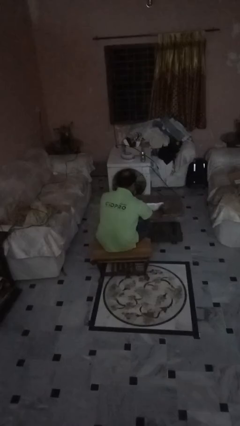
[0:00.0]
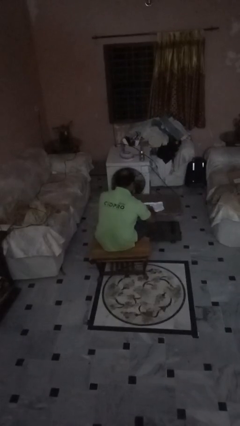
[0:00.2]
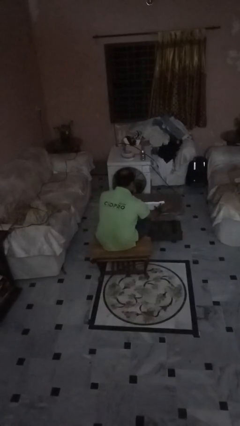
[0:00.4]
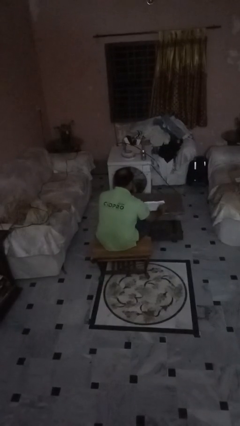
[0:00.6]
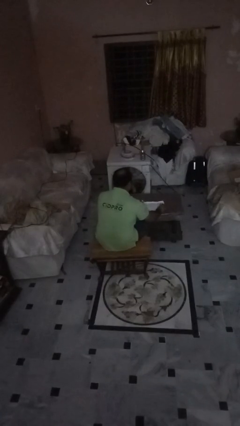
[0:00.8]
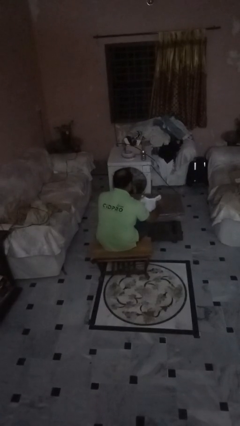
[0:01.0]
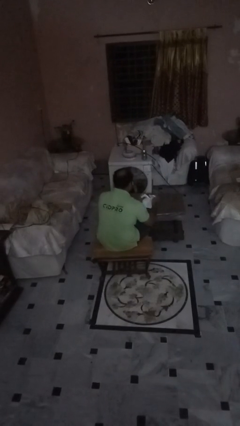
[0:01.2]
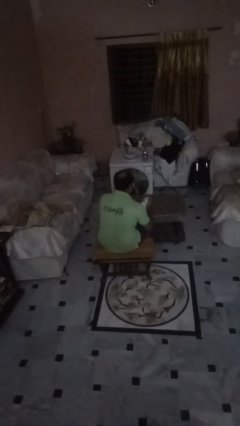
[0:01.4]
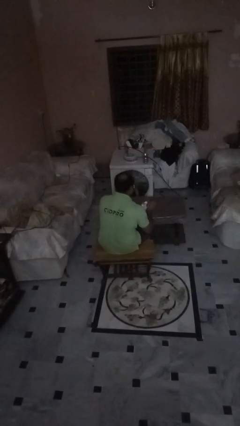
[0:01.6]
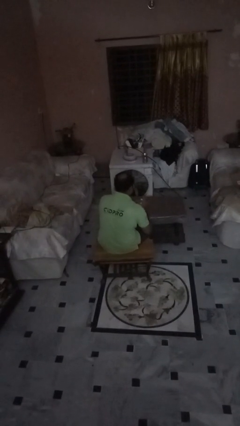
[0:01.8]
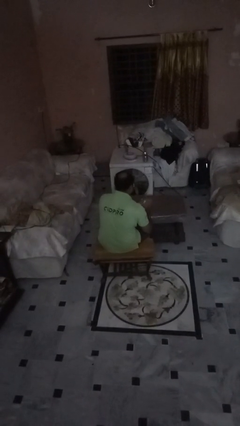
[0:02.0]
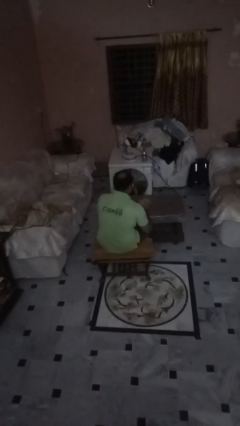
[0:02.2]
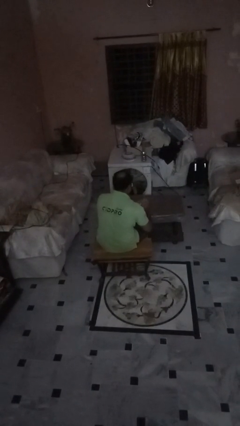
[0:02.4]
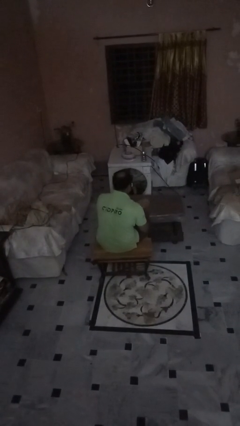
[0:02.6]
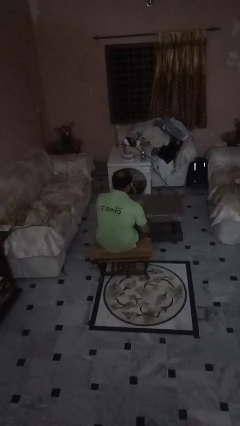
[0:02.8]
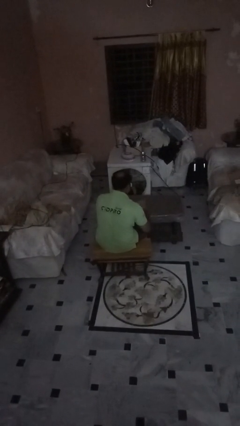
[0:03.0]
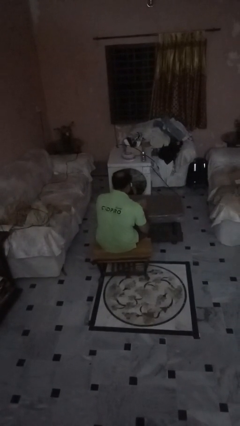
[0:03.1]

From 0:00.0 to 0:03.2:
person crumples paper

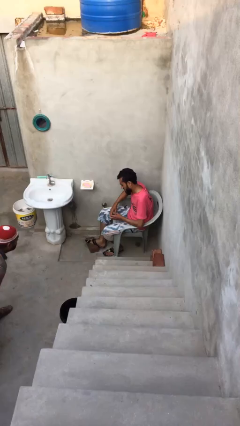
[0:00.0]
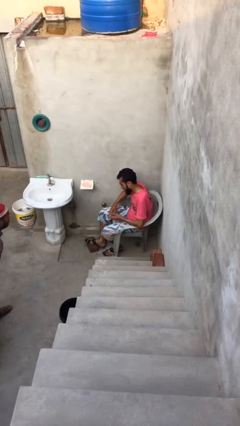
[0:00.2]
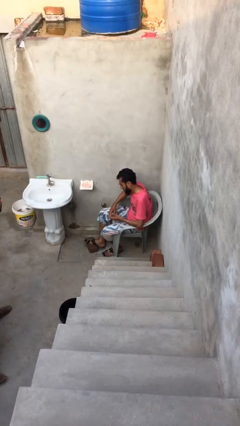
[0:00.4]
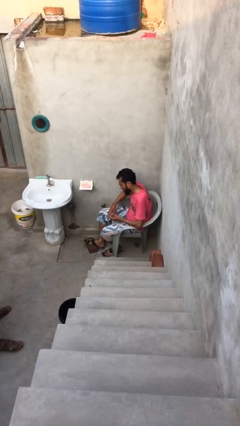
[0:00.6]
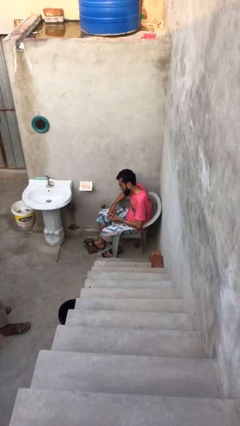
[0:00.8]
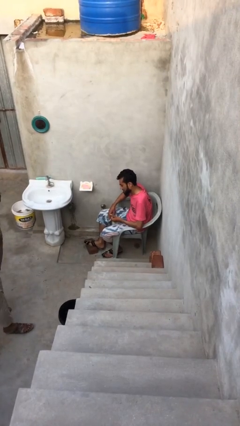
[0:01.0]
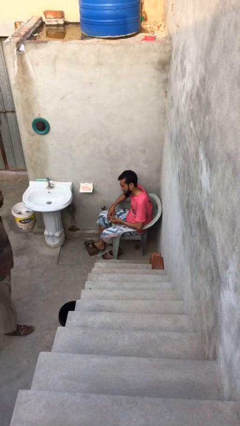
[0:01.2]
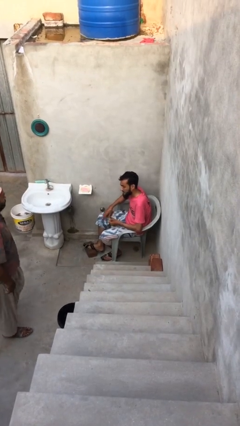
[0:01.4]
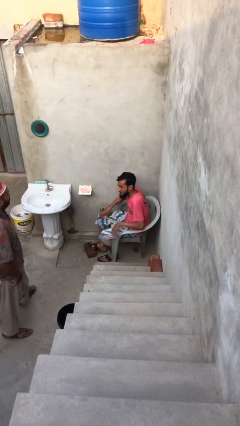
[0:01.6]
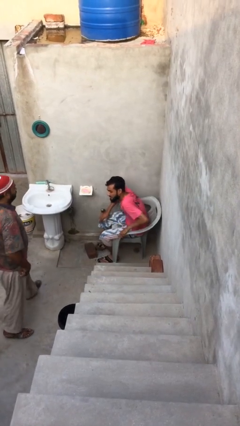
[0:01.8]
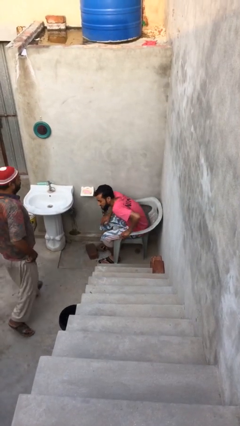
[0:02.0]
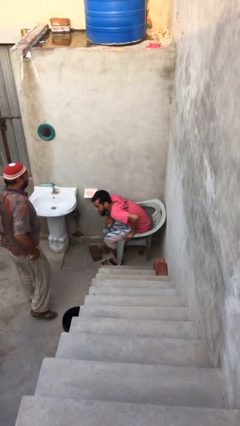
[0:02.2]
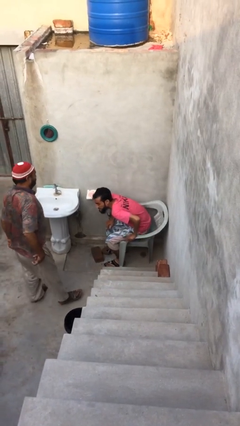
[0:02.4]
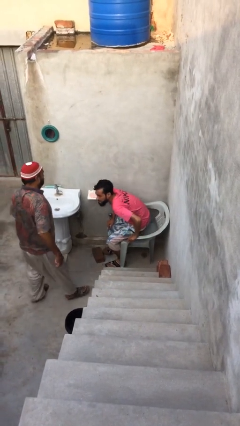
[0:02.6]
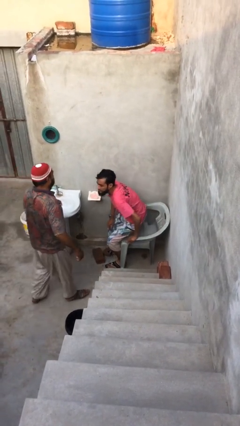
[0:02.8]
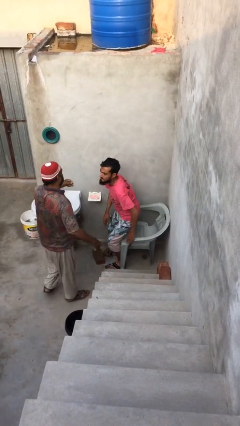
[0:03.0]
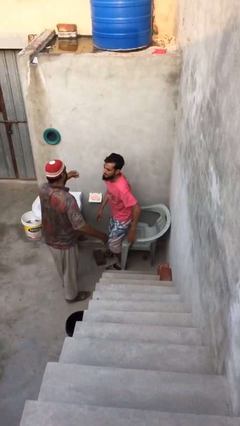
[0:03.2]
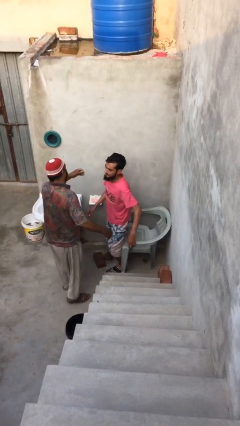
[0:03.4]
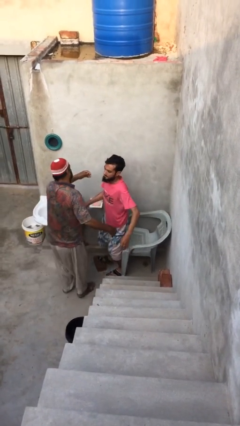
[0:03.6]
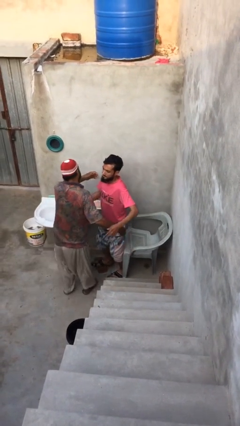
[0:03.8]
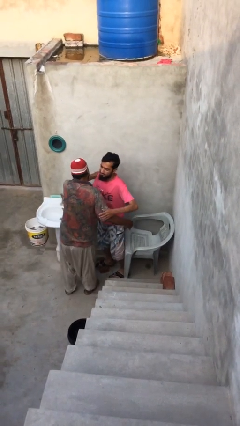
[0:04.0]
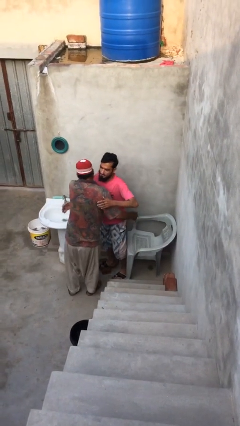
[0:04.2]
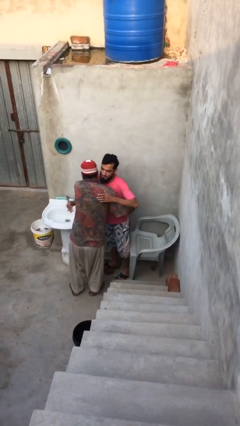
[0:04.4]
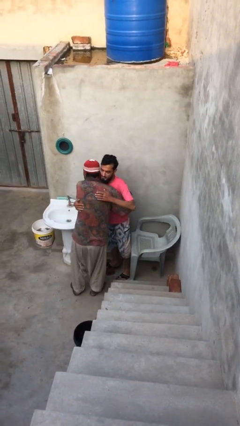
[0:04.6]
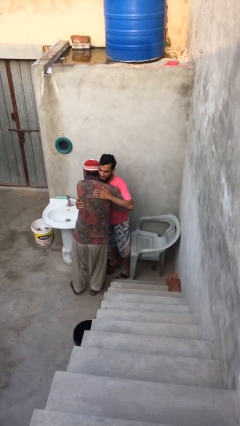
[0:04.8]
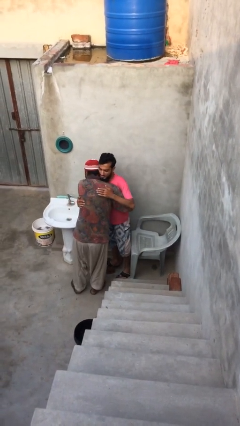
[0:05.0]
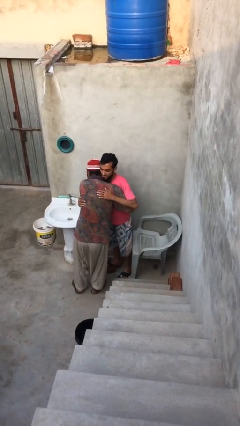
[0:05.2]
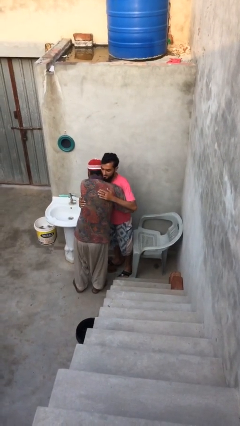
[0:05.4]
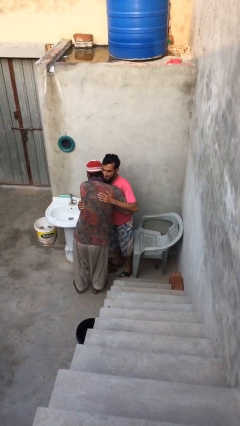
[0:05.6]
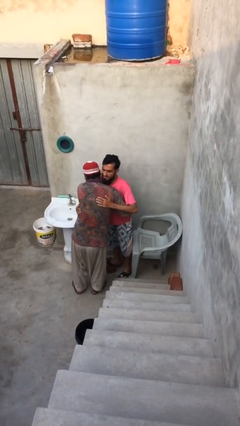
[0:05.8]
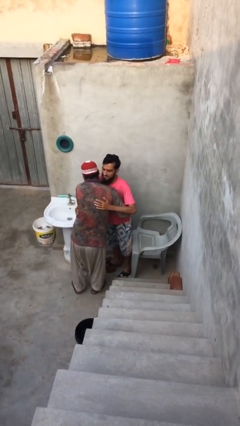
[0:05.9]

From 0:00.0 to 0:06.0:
person embraces person

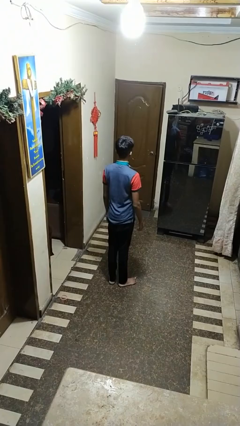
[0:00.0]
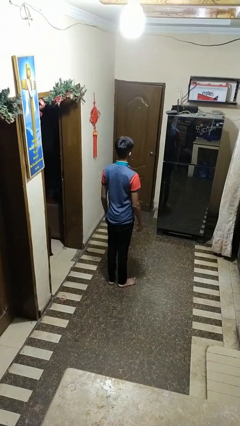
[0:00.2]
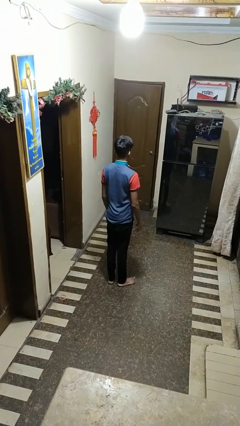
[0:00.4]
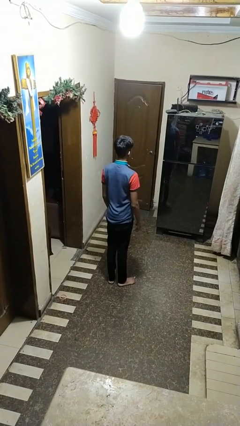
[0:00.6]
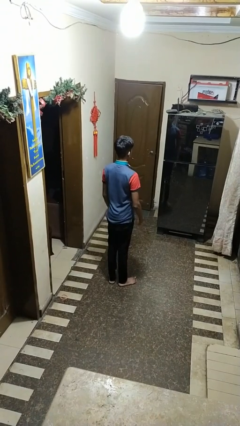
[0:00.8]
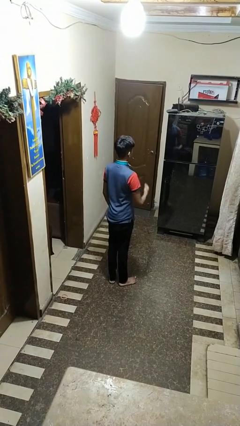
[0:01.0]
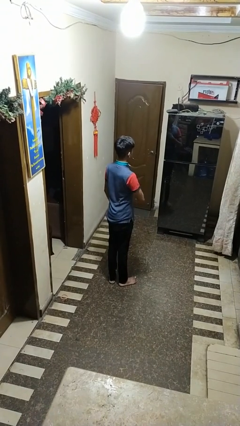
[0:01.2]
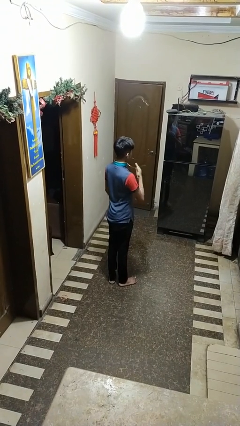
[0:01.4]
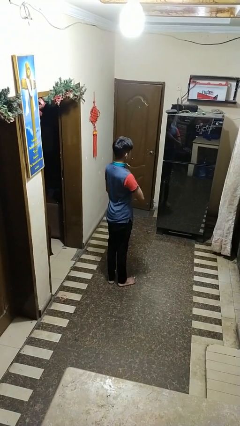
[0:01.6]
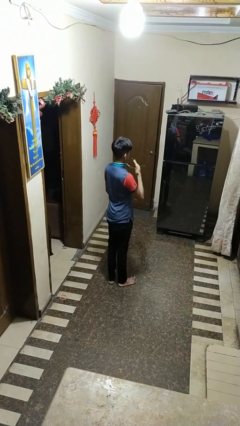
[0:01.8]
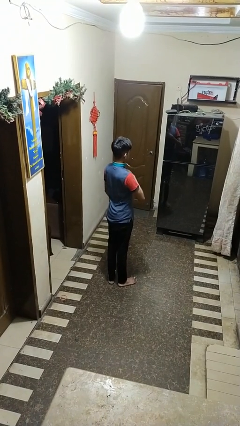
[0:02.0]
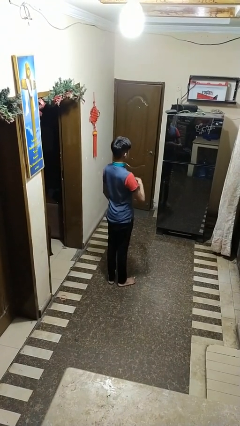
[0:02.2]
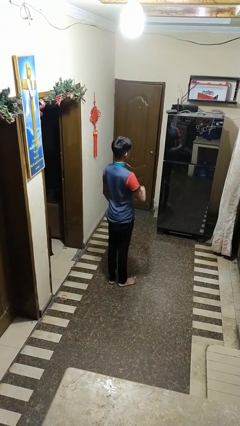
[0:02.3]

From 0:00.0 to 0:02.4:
person drums on chest

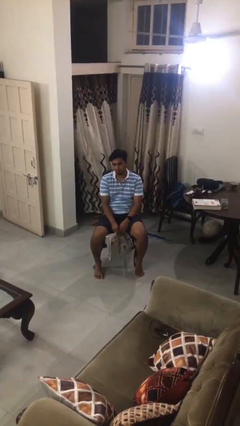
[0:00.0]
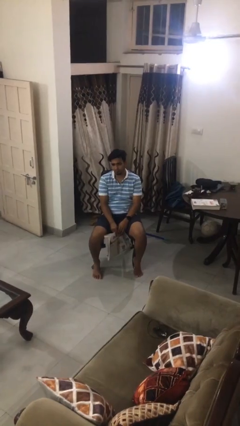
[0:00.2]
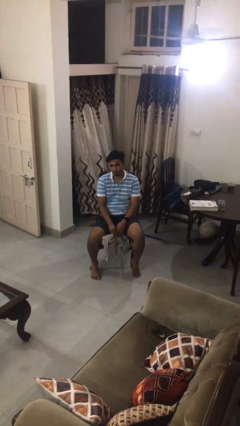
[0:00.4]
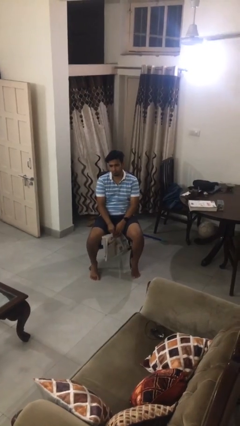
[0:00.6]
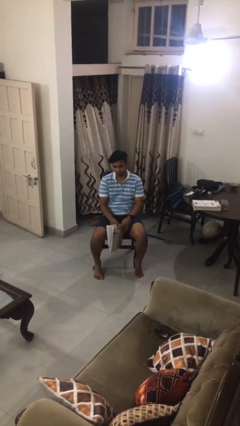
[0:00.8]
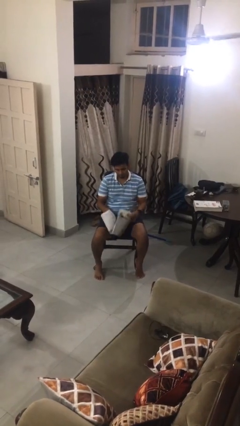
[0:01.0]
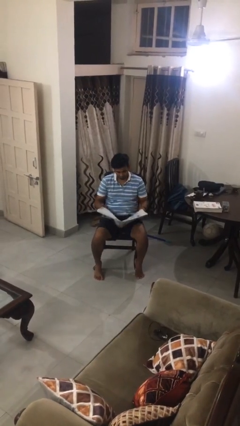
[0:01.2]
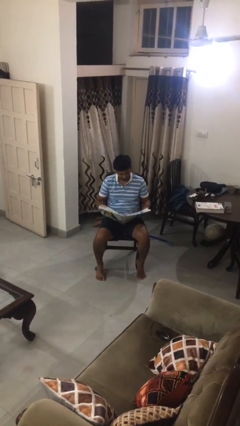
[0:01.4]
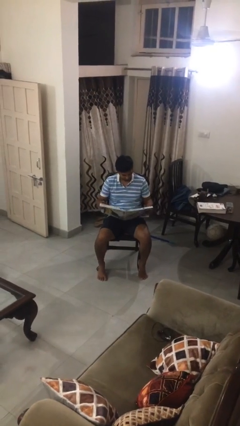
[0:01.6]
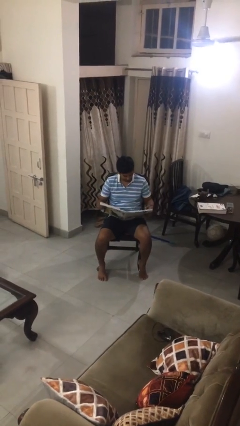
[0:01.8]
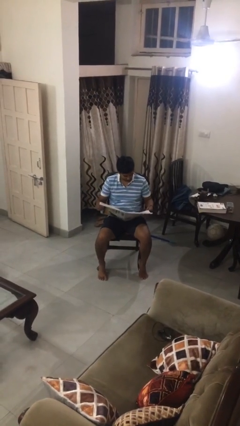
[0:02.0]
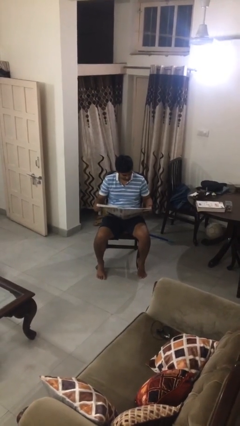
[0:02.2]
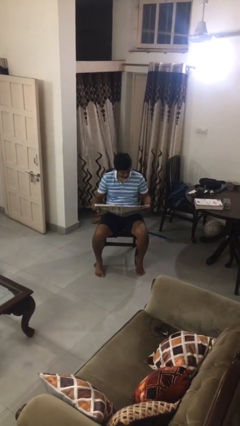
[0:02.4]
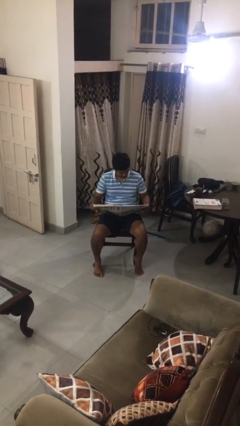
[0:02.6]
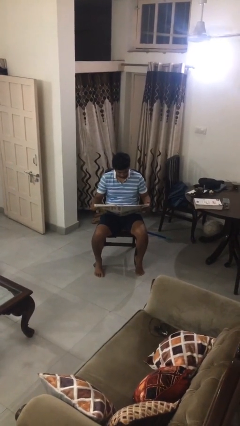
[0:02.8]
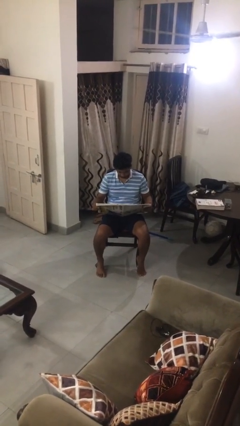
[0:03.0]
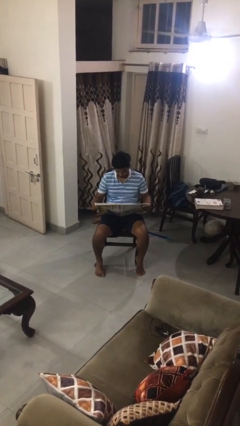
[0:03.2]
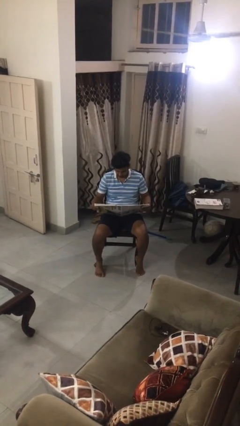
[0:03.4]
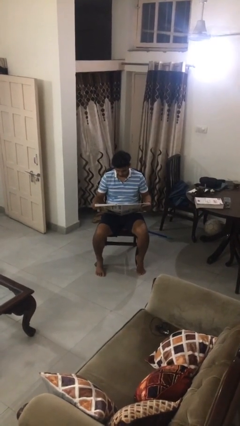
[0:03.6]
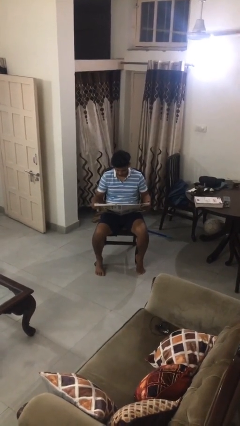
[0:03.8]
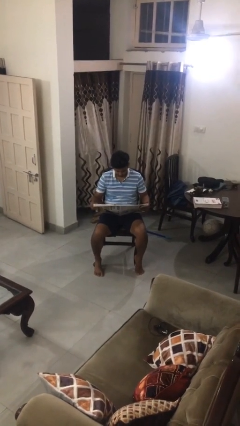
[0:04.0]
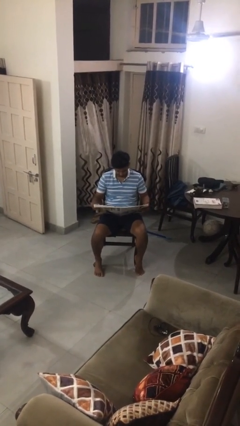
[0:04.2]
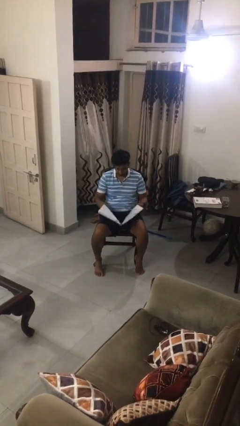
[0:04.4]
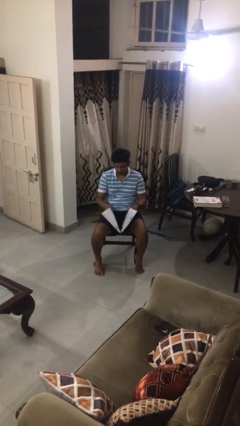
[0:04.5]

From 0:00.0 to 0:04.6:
person reads newspaper

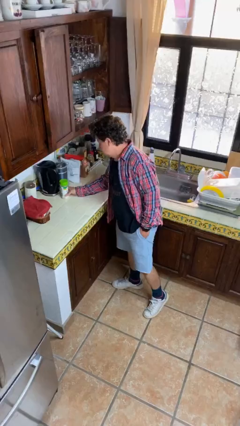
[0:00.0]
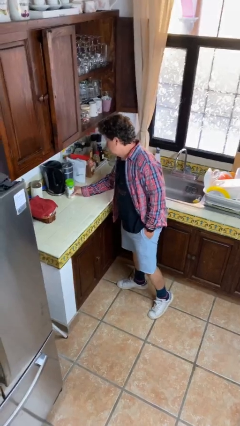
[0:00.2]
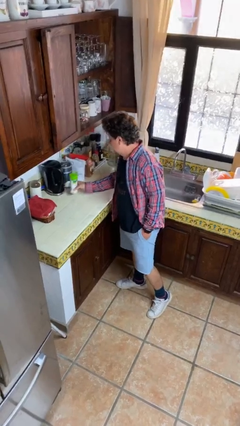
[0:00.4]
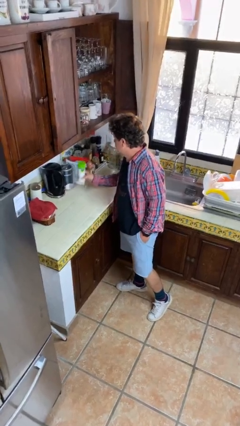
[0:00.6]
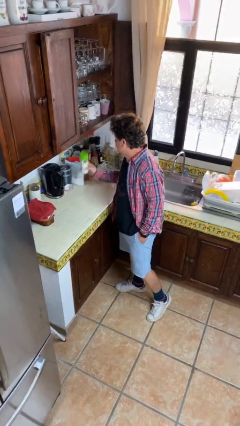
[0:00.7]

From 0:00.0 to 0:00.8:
person picks up object from table

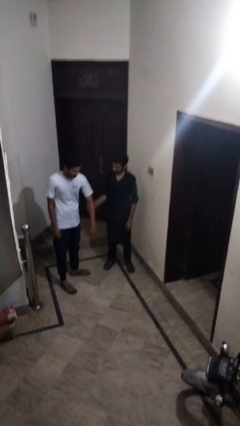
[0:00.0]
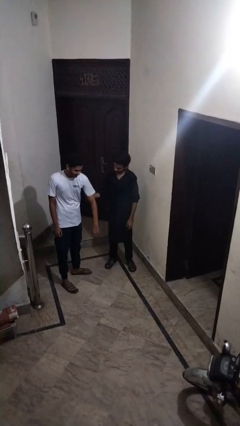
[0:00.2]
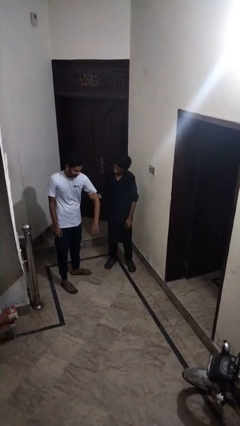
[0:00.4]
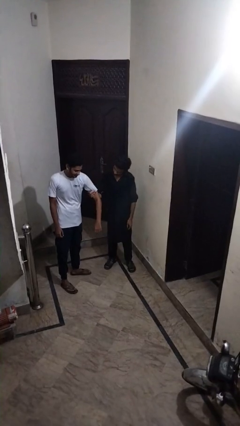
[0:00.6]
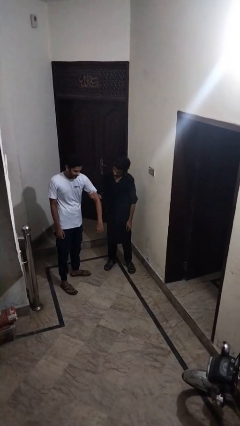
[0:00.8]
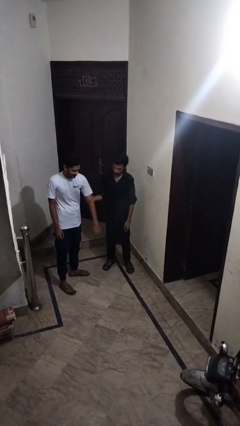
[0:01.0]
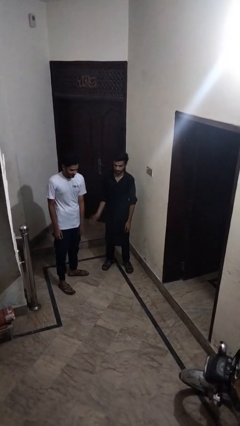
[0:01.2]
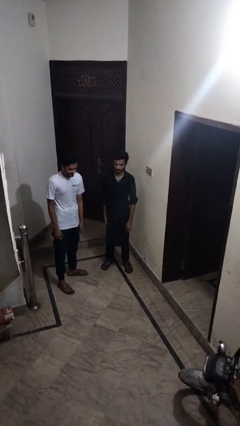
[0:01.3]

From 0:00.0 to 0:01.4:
person grabs person by bicep
